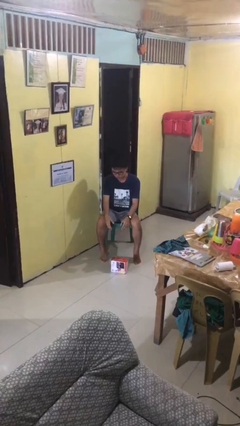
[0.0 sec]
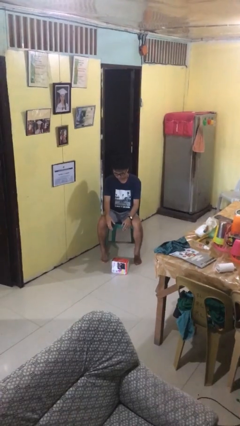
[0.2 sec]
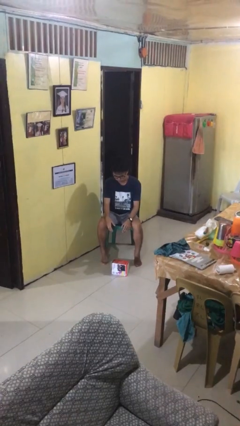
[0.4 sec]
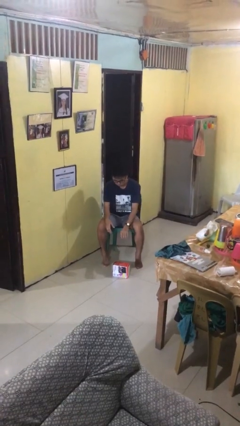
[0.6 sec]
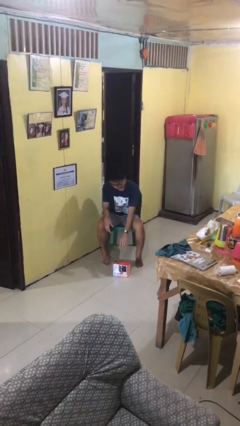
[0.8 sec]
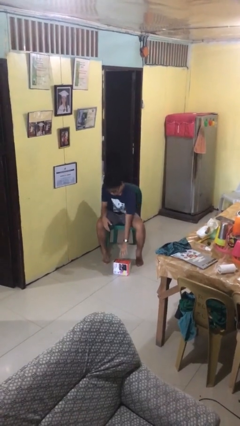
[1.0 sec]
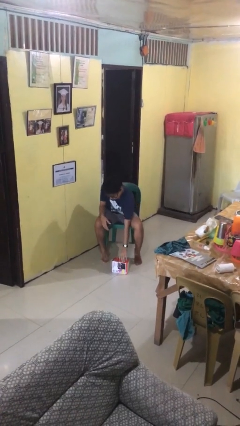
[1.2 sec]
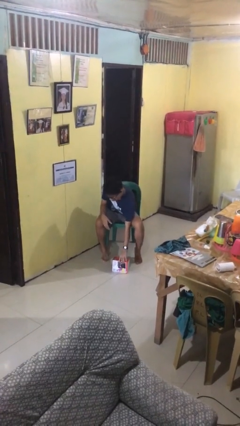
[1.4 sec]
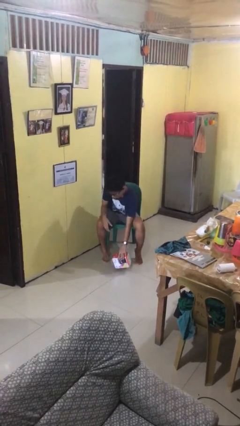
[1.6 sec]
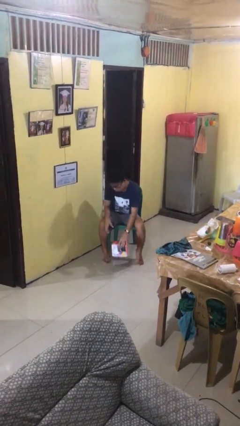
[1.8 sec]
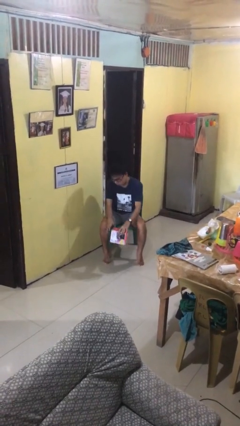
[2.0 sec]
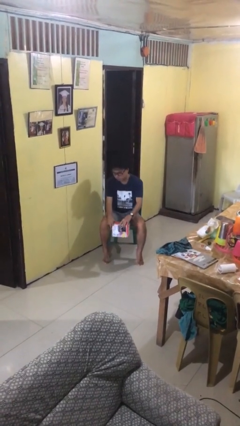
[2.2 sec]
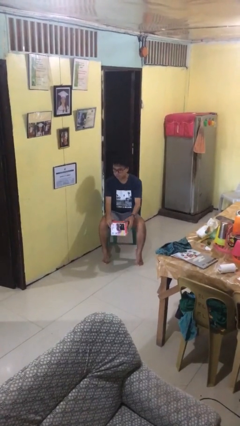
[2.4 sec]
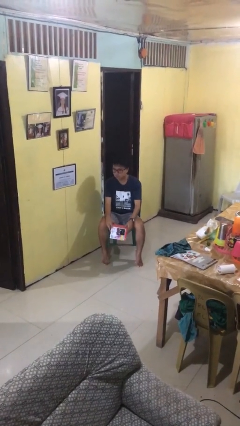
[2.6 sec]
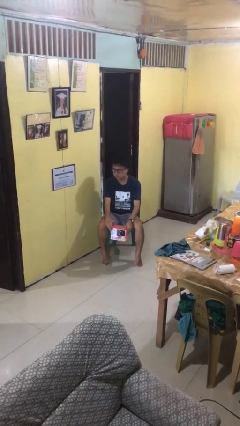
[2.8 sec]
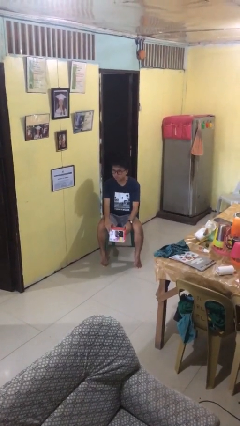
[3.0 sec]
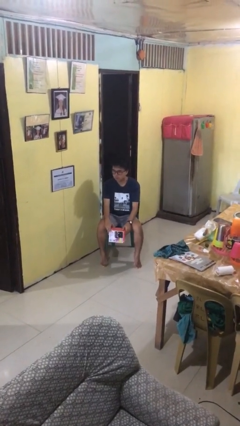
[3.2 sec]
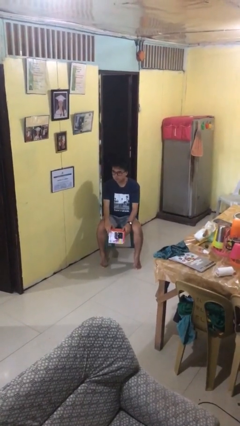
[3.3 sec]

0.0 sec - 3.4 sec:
person picks up object from floor

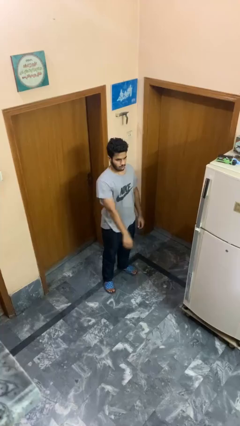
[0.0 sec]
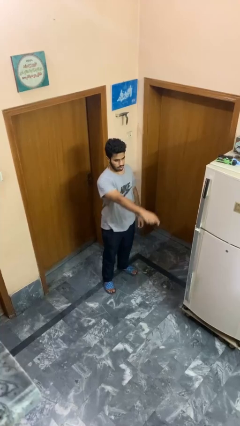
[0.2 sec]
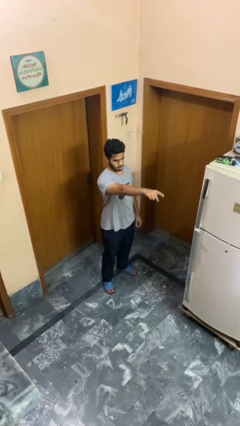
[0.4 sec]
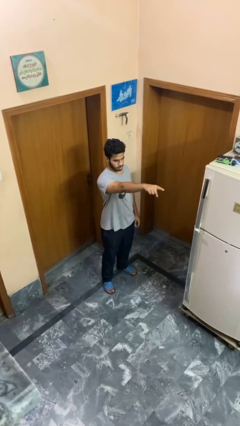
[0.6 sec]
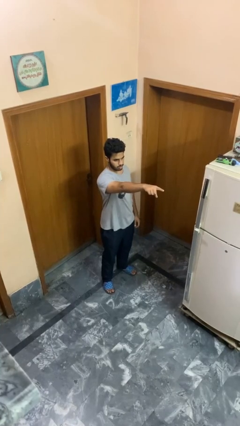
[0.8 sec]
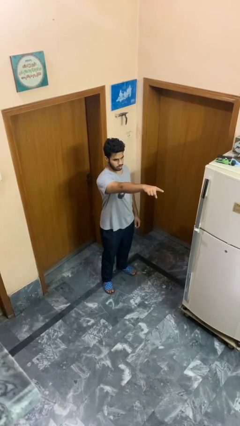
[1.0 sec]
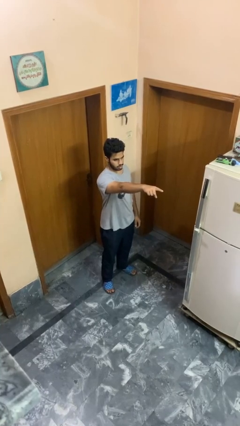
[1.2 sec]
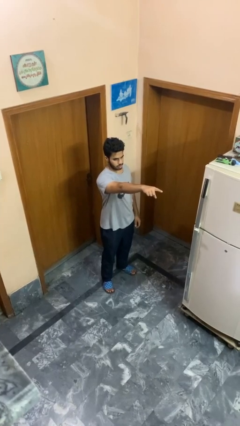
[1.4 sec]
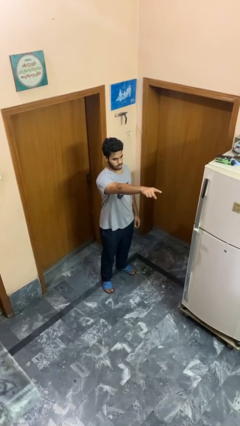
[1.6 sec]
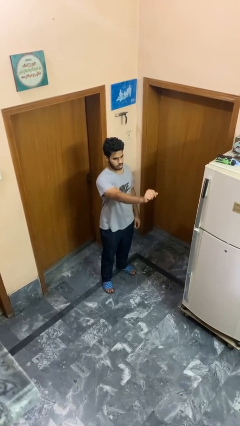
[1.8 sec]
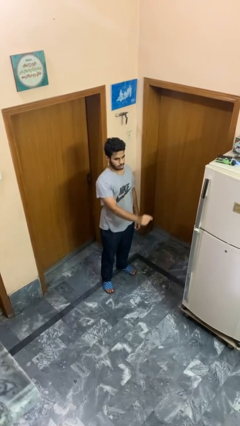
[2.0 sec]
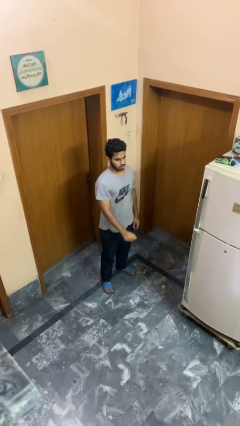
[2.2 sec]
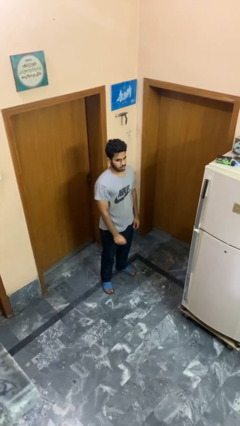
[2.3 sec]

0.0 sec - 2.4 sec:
person points at person

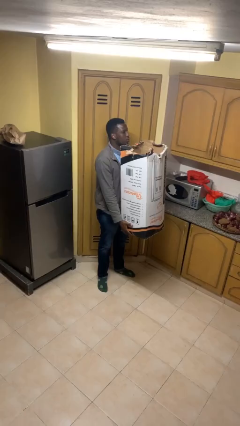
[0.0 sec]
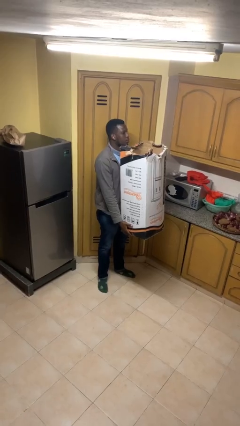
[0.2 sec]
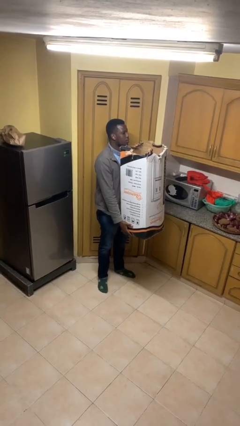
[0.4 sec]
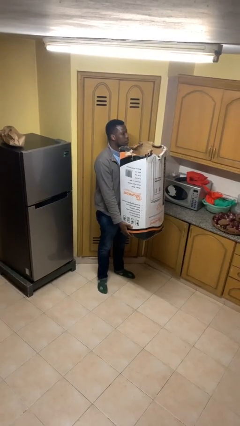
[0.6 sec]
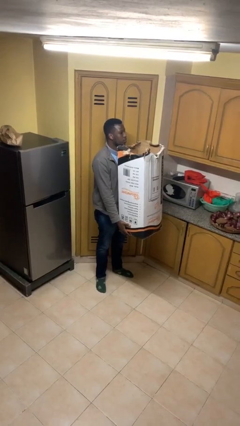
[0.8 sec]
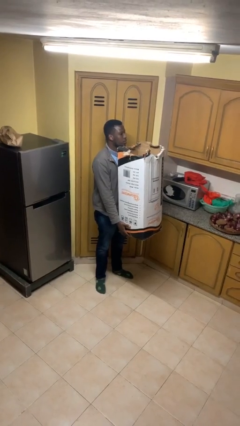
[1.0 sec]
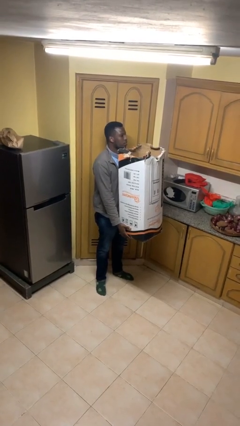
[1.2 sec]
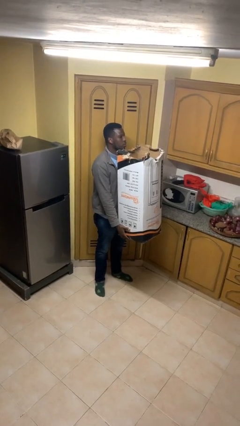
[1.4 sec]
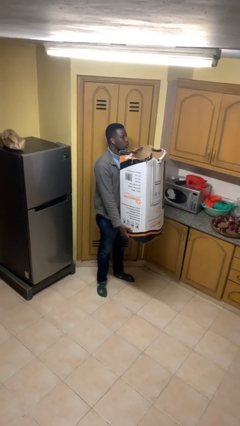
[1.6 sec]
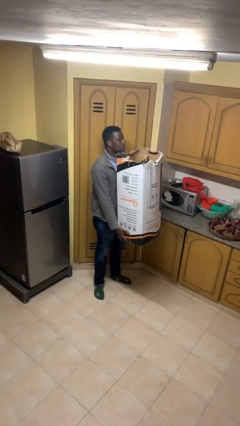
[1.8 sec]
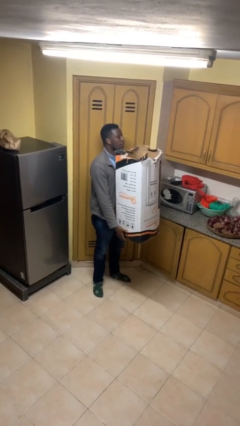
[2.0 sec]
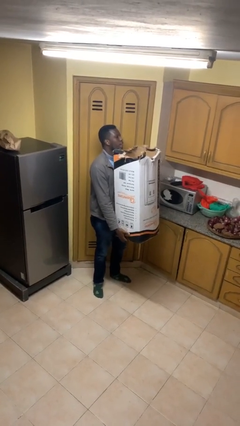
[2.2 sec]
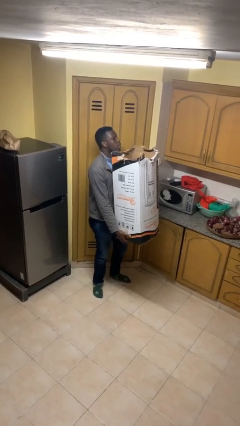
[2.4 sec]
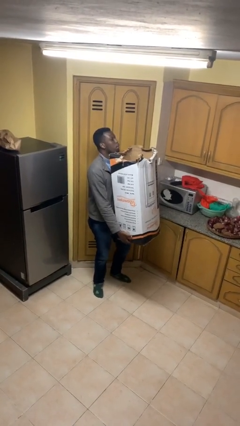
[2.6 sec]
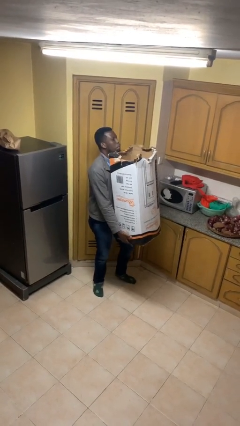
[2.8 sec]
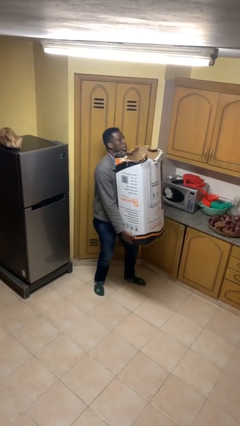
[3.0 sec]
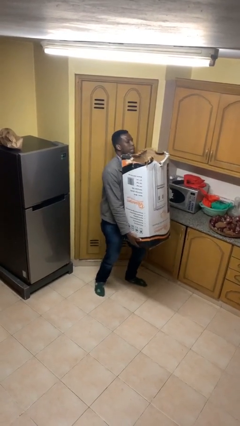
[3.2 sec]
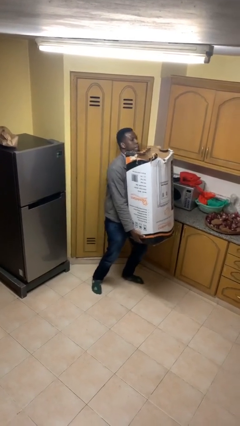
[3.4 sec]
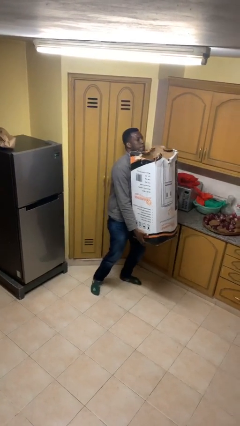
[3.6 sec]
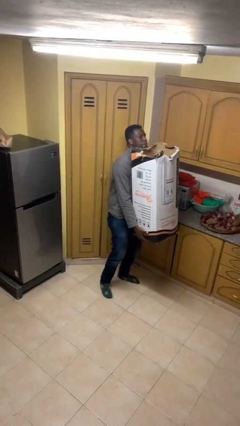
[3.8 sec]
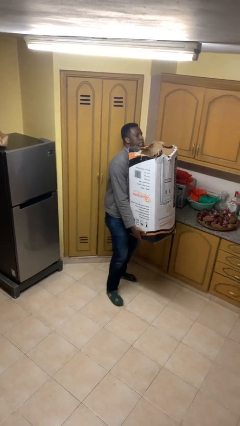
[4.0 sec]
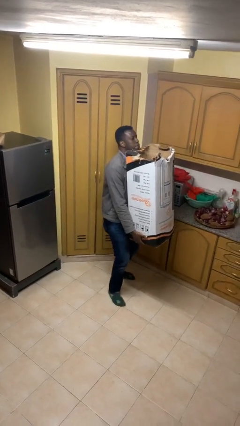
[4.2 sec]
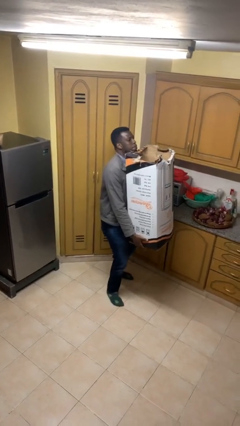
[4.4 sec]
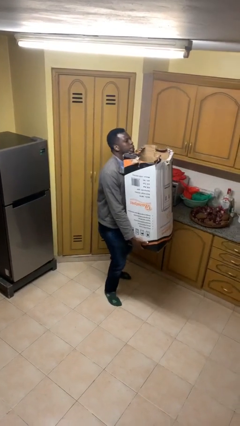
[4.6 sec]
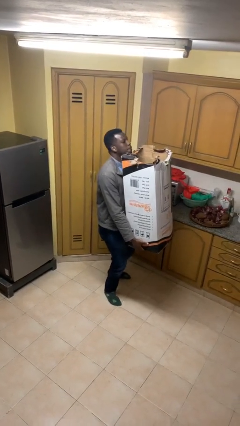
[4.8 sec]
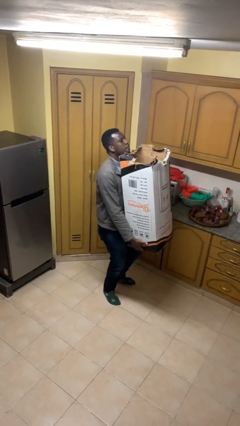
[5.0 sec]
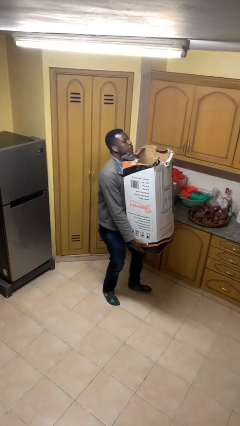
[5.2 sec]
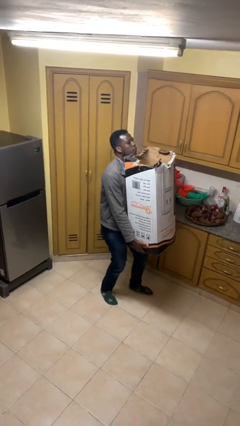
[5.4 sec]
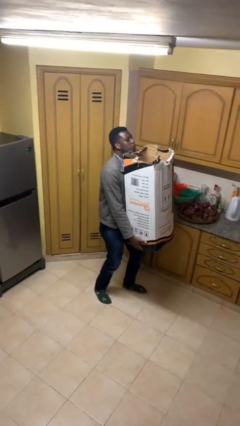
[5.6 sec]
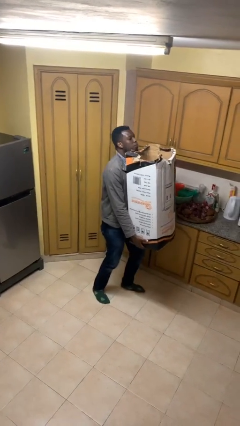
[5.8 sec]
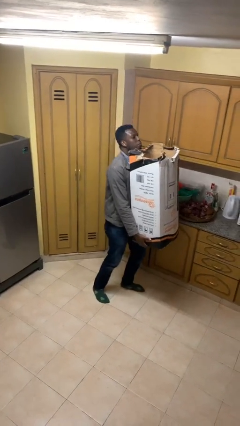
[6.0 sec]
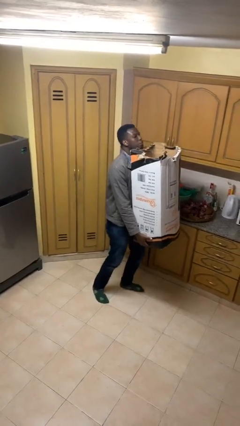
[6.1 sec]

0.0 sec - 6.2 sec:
person carries heavy object

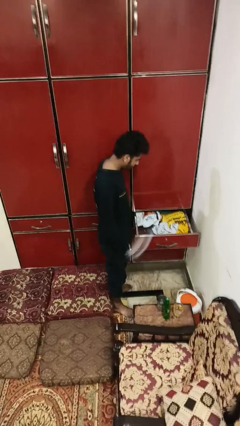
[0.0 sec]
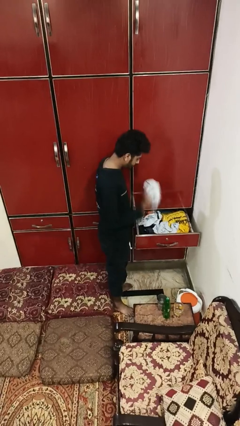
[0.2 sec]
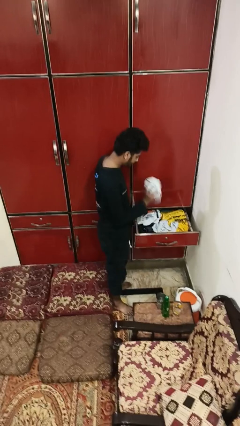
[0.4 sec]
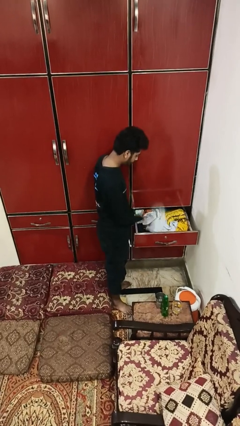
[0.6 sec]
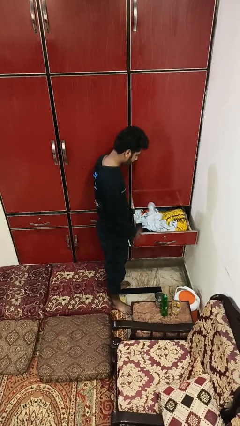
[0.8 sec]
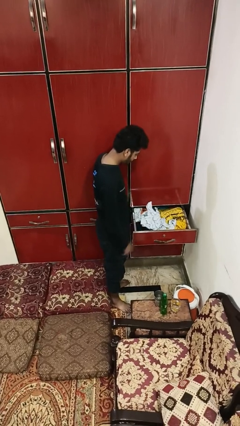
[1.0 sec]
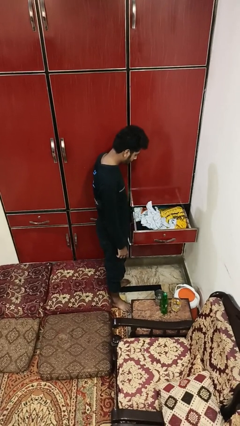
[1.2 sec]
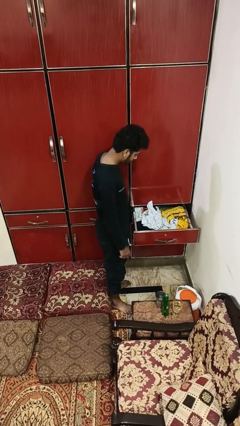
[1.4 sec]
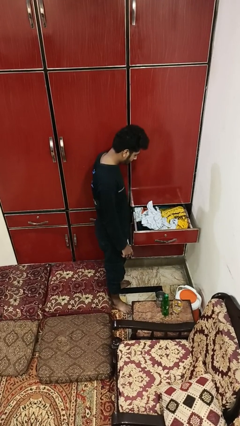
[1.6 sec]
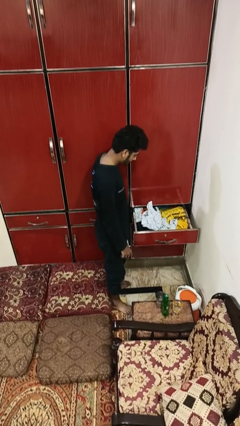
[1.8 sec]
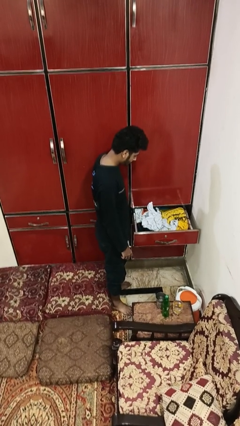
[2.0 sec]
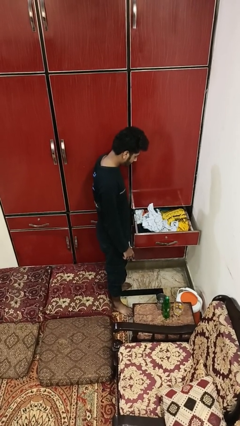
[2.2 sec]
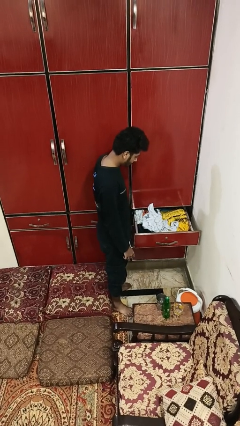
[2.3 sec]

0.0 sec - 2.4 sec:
person puts clothes into dresser

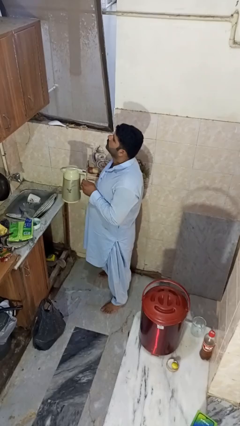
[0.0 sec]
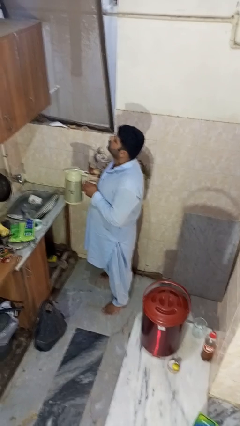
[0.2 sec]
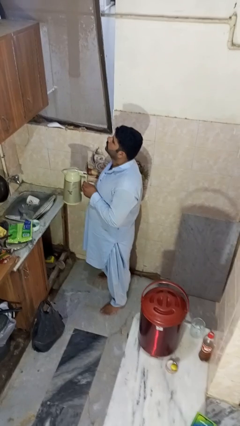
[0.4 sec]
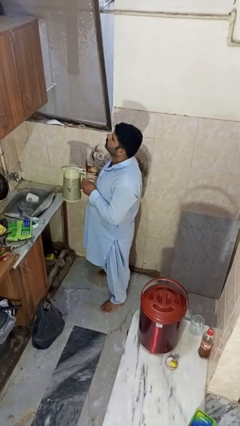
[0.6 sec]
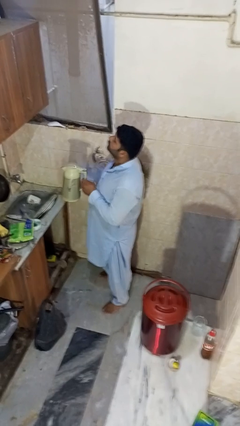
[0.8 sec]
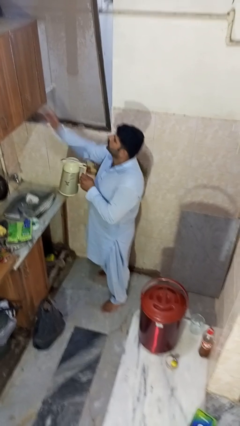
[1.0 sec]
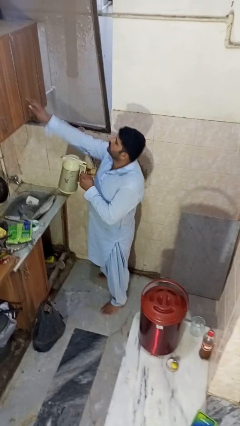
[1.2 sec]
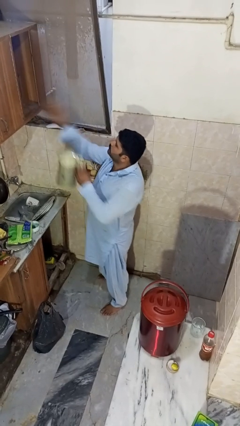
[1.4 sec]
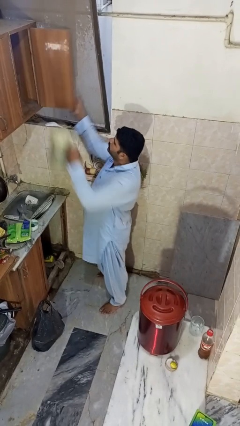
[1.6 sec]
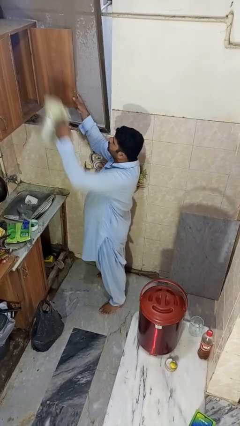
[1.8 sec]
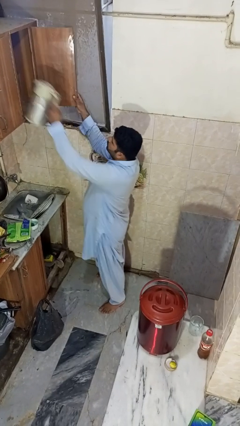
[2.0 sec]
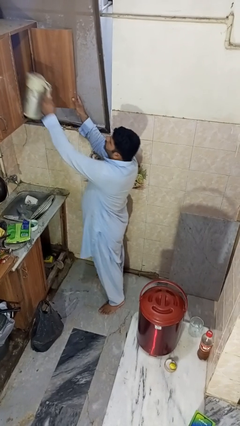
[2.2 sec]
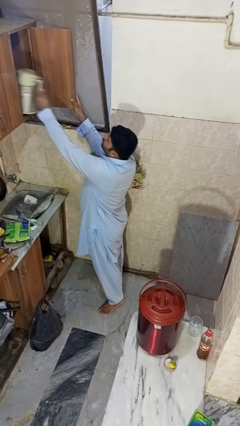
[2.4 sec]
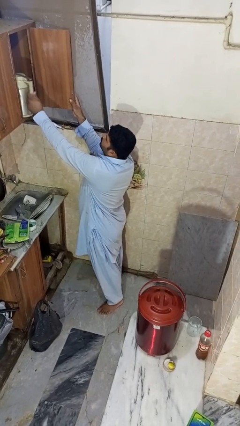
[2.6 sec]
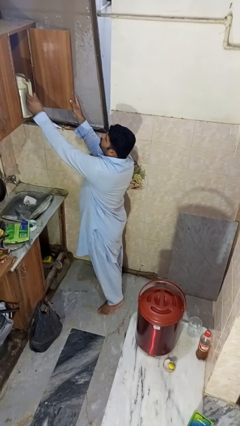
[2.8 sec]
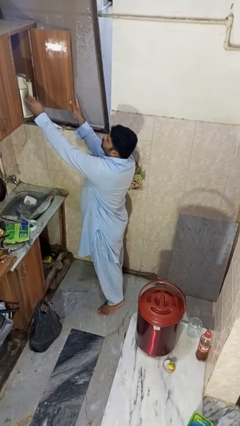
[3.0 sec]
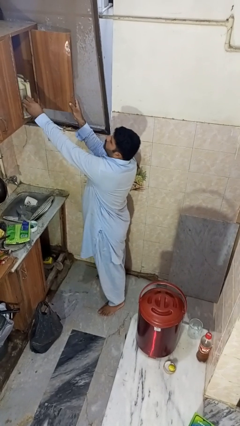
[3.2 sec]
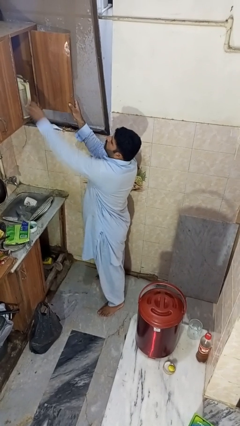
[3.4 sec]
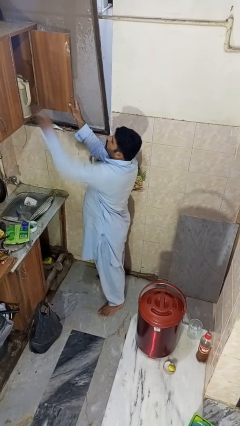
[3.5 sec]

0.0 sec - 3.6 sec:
person puts object in cabinet
